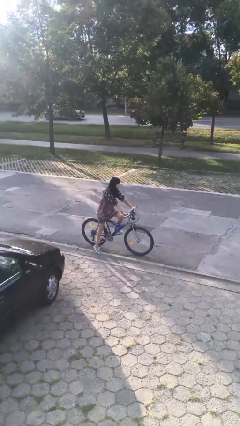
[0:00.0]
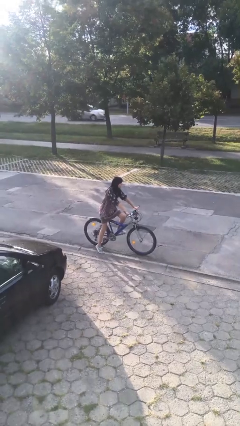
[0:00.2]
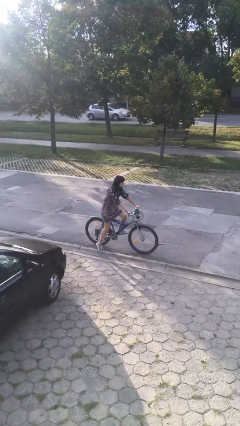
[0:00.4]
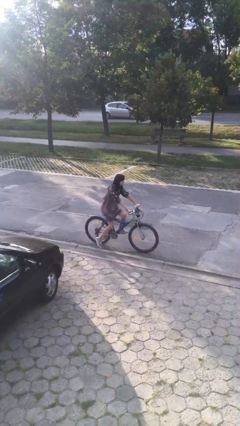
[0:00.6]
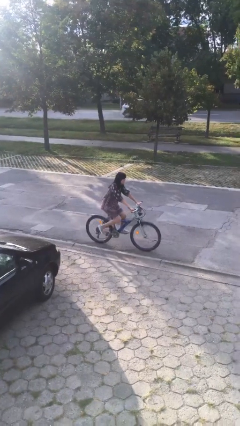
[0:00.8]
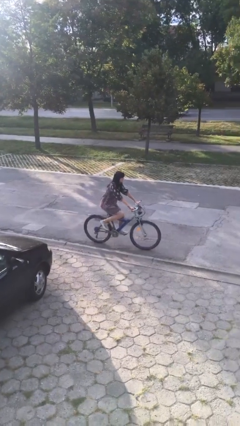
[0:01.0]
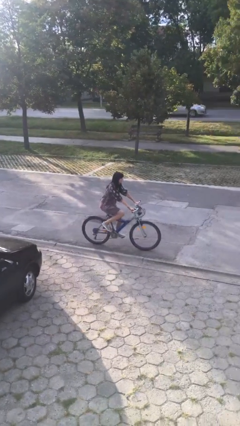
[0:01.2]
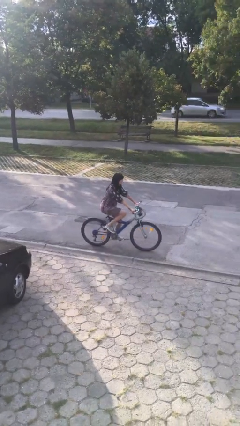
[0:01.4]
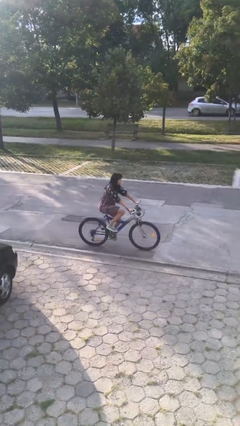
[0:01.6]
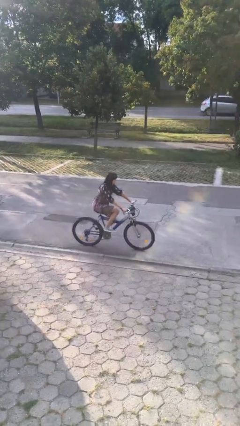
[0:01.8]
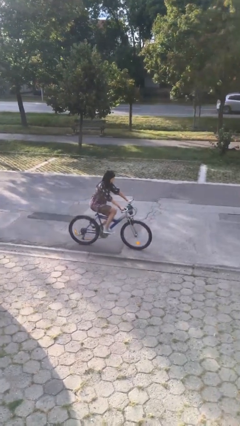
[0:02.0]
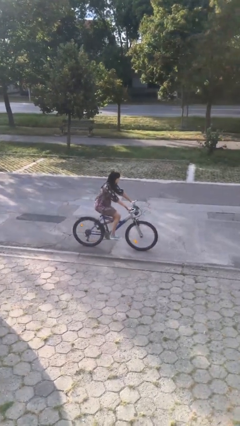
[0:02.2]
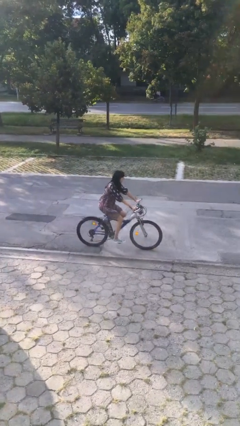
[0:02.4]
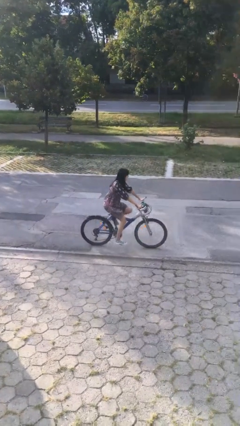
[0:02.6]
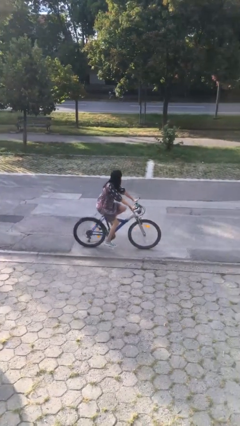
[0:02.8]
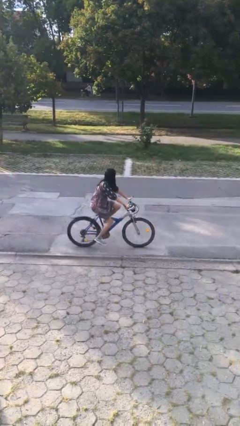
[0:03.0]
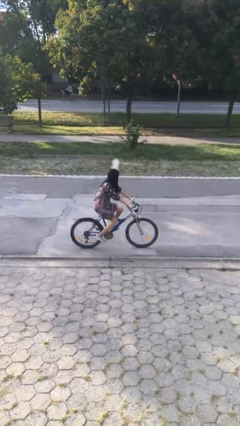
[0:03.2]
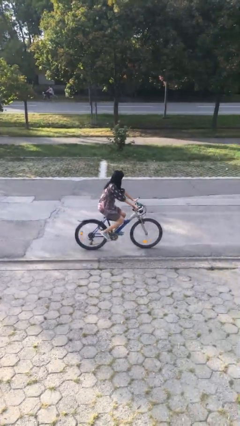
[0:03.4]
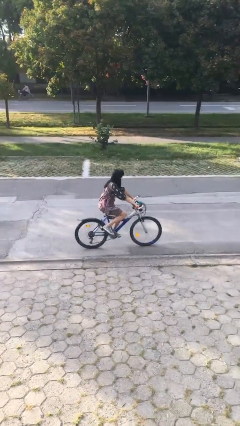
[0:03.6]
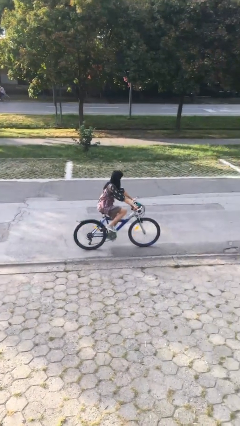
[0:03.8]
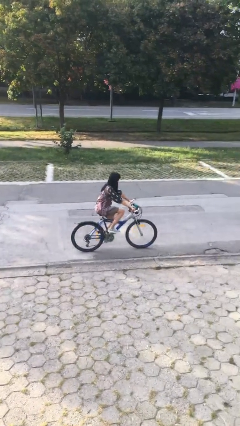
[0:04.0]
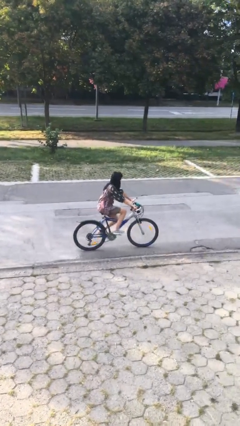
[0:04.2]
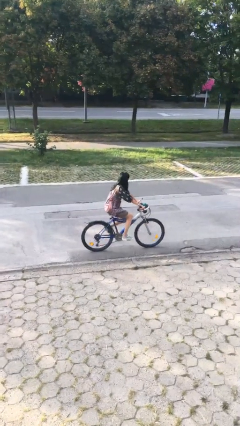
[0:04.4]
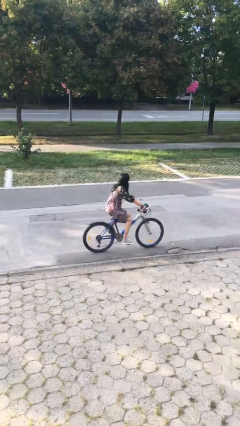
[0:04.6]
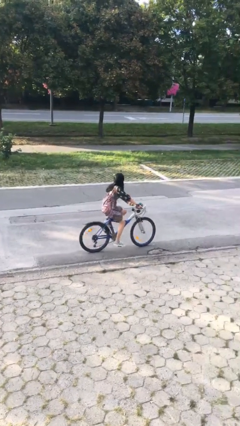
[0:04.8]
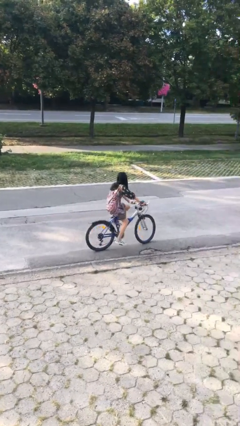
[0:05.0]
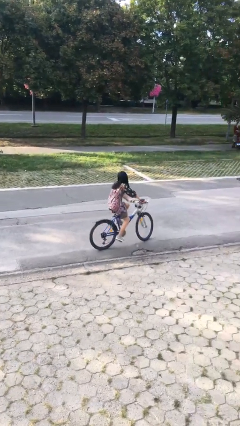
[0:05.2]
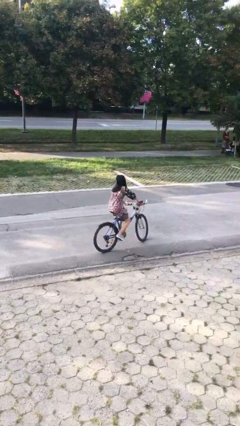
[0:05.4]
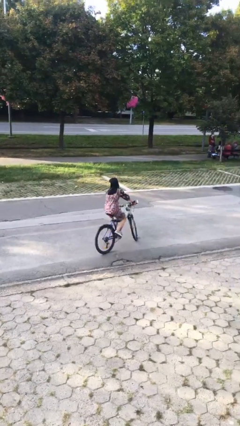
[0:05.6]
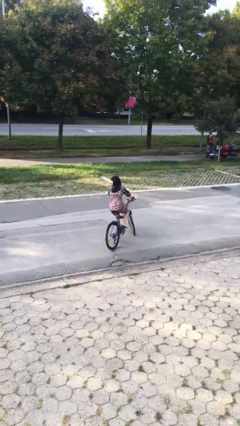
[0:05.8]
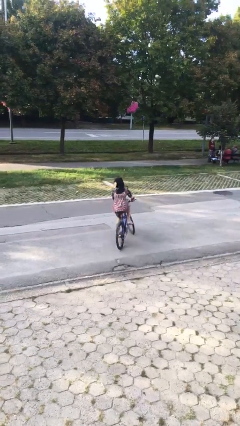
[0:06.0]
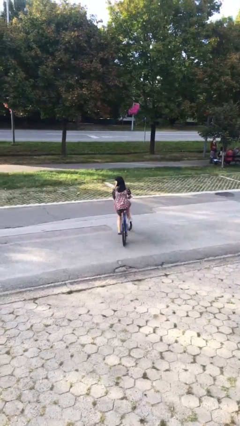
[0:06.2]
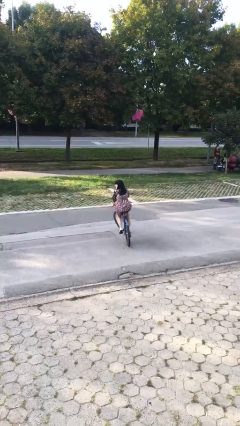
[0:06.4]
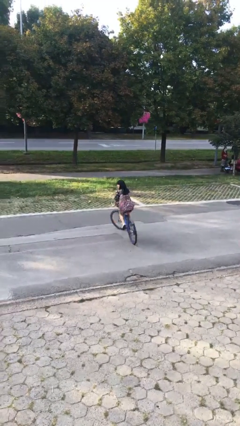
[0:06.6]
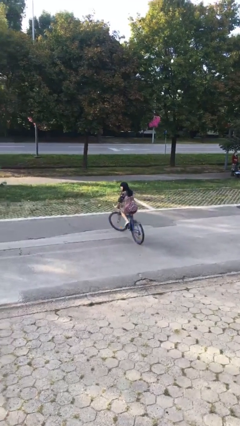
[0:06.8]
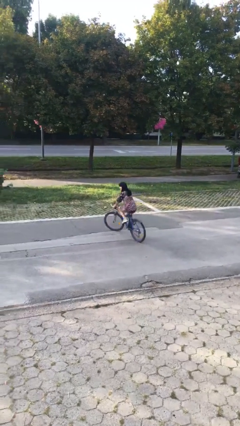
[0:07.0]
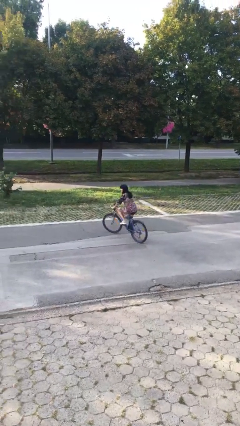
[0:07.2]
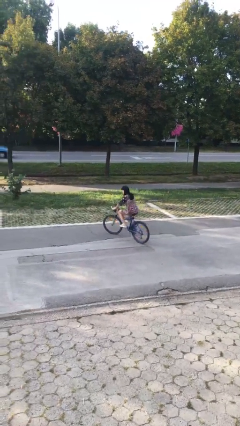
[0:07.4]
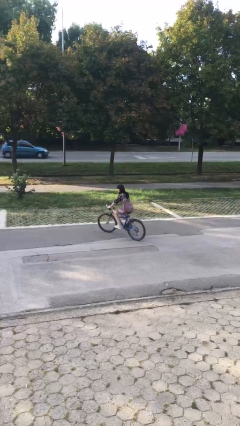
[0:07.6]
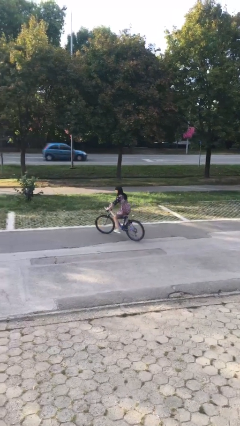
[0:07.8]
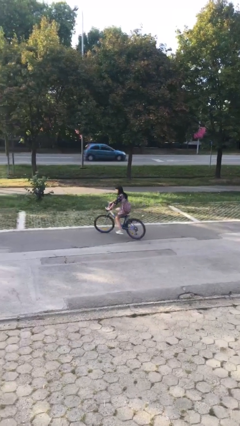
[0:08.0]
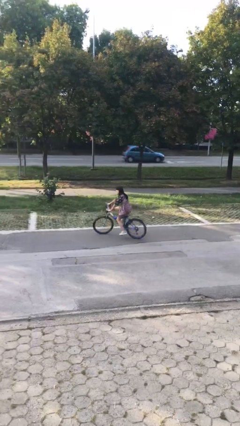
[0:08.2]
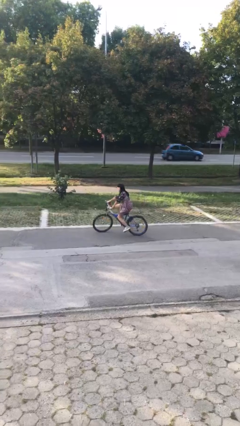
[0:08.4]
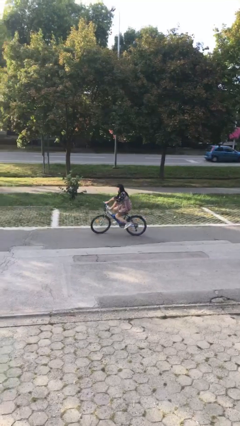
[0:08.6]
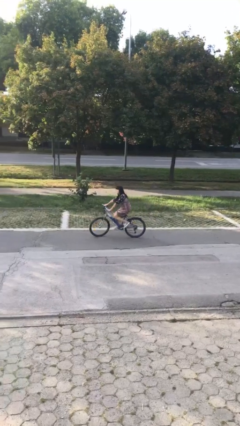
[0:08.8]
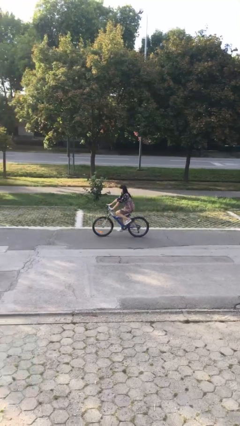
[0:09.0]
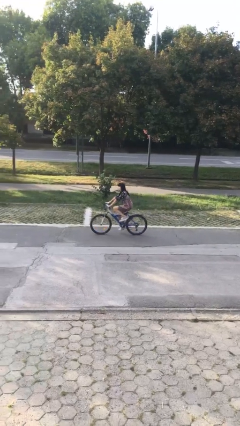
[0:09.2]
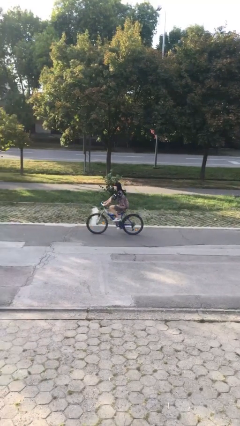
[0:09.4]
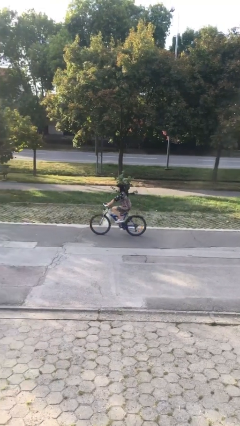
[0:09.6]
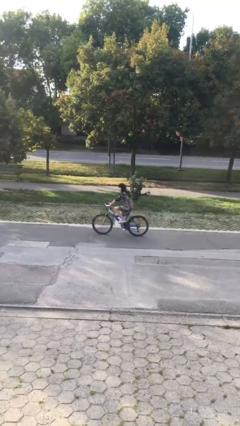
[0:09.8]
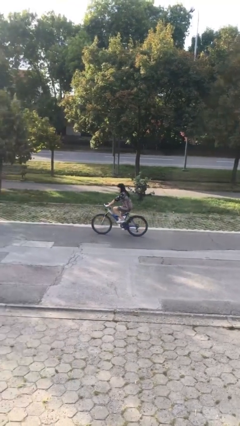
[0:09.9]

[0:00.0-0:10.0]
person rides bicycle

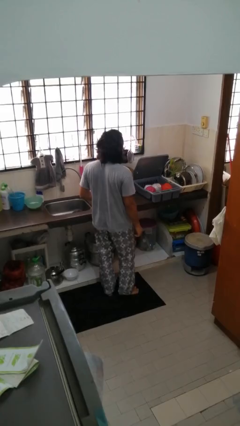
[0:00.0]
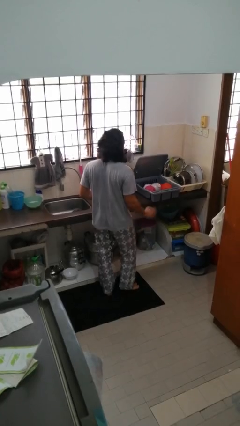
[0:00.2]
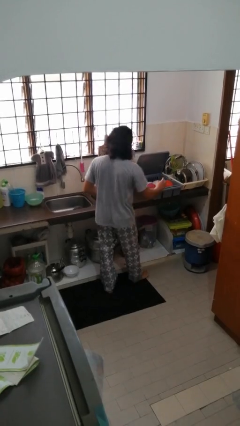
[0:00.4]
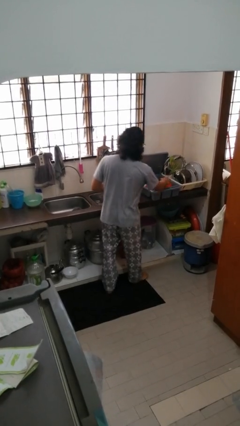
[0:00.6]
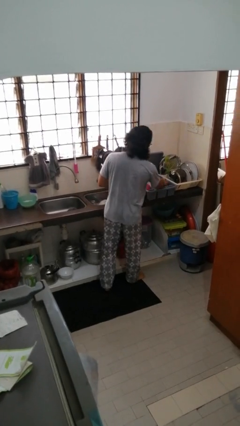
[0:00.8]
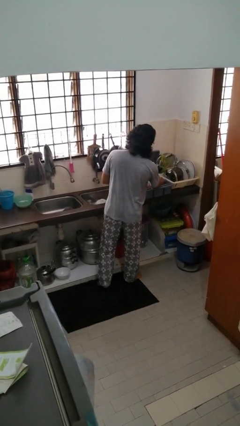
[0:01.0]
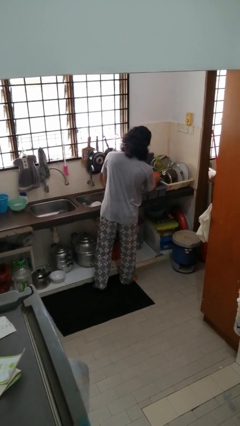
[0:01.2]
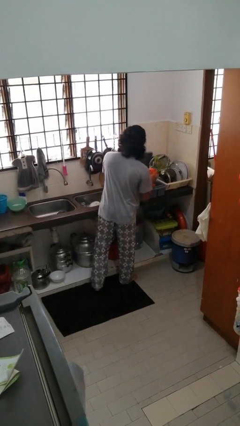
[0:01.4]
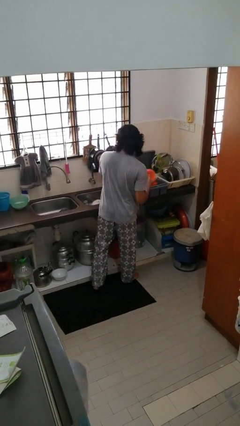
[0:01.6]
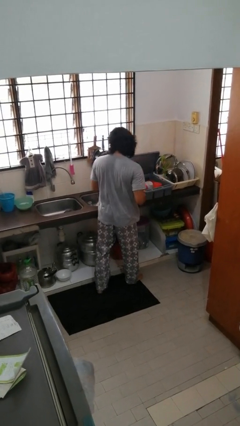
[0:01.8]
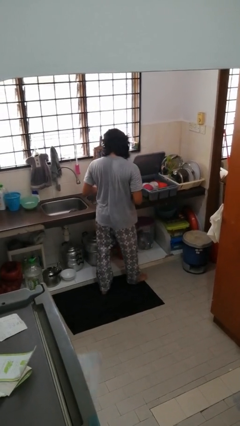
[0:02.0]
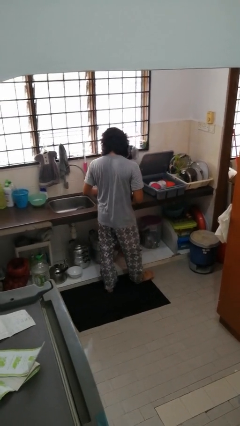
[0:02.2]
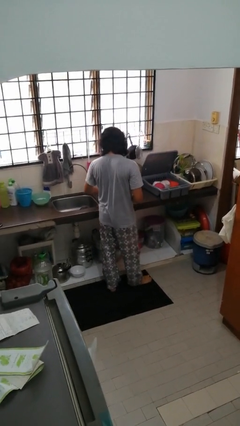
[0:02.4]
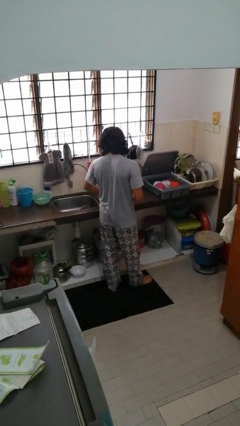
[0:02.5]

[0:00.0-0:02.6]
person unloads dishwasher

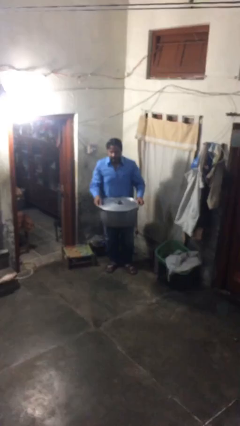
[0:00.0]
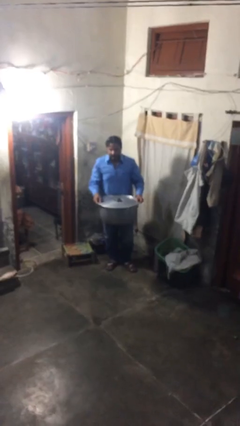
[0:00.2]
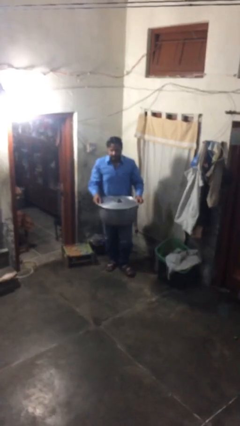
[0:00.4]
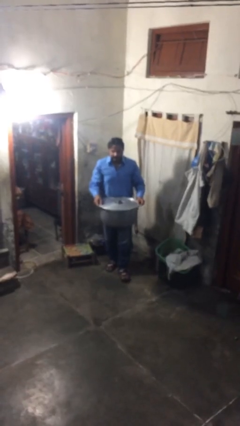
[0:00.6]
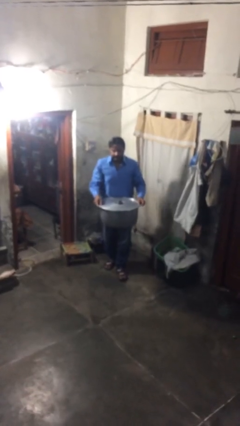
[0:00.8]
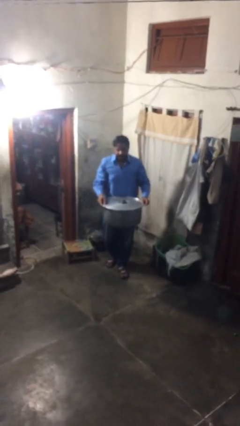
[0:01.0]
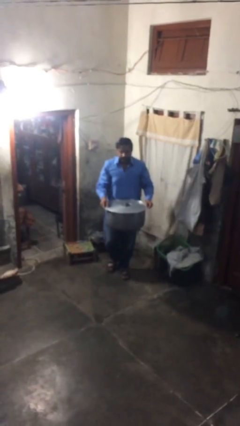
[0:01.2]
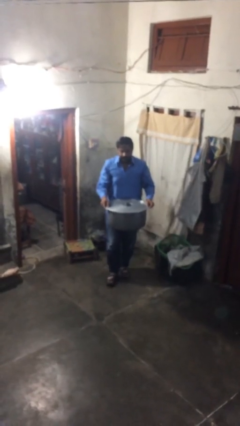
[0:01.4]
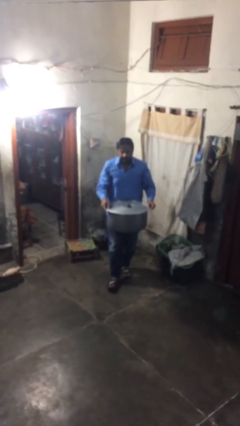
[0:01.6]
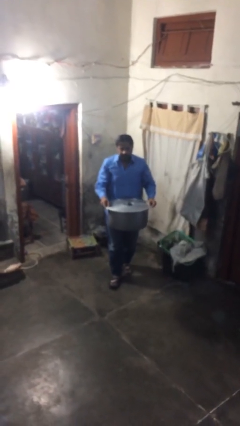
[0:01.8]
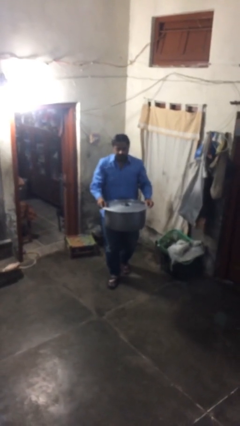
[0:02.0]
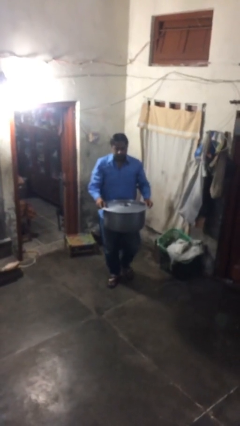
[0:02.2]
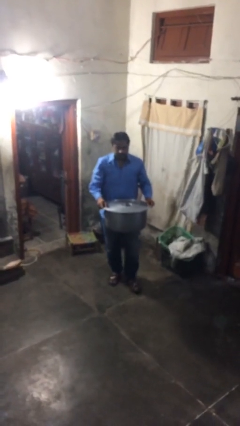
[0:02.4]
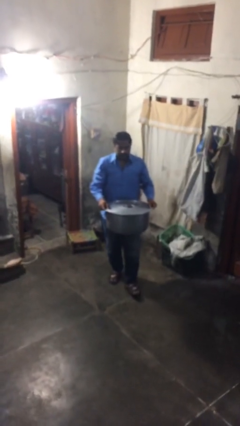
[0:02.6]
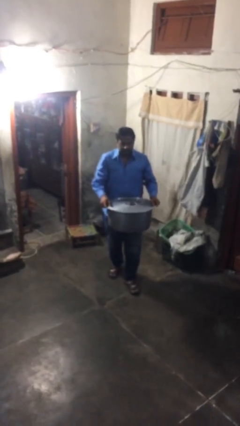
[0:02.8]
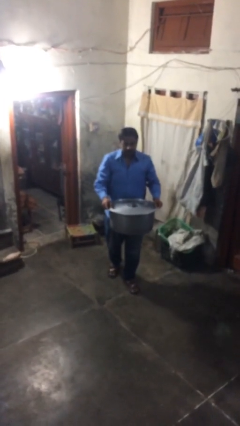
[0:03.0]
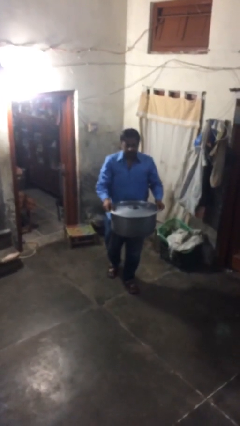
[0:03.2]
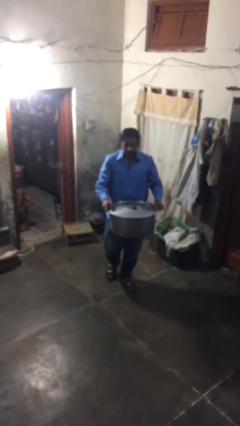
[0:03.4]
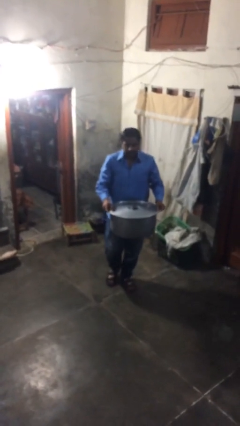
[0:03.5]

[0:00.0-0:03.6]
person carries heavy object

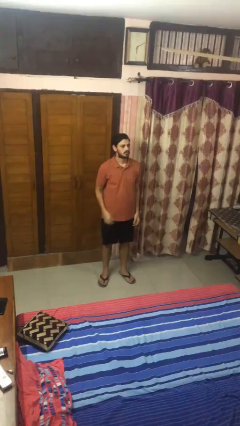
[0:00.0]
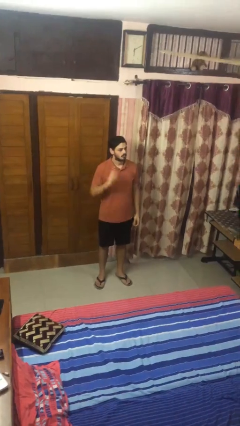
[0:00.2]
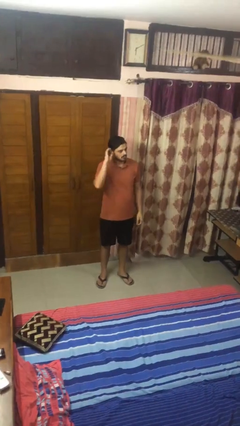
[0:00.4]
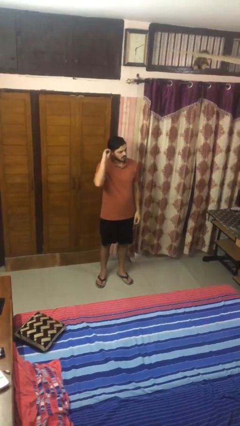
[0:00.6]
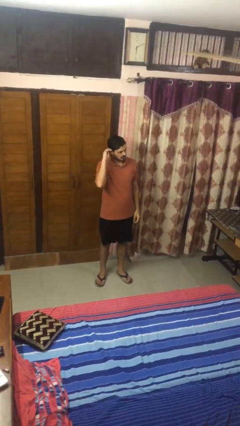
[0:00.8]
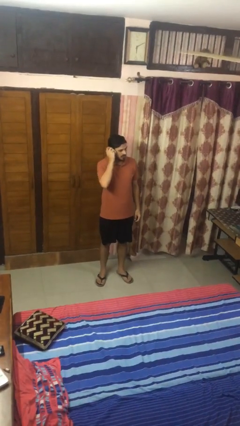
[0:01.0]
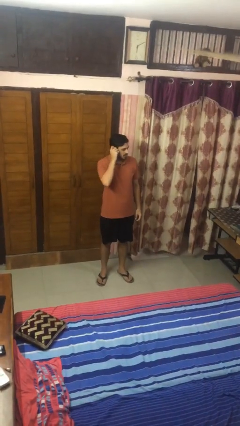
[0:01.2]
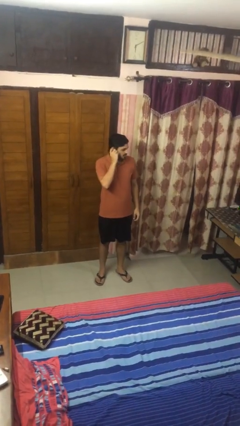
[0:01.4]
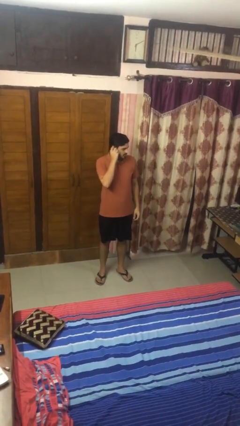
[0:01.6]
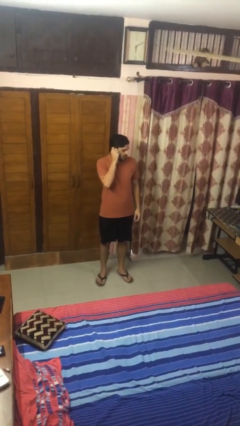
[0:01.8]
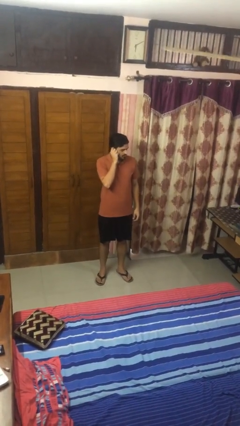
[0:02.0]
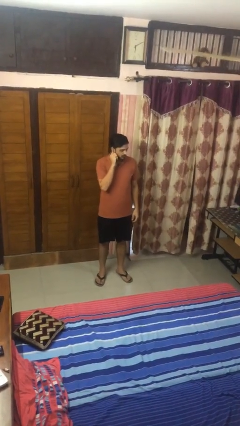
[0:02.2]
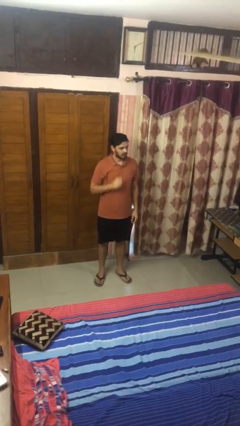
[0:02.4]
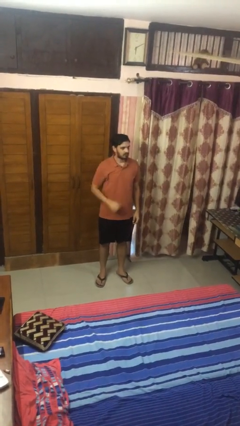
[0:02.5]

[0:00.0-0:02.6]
person touches earlobe
